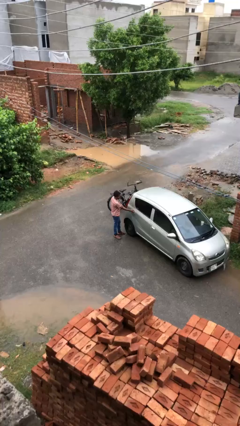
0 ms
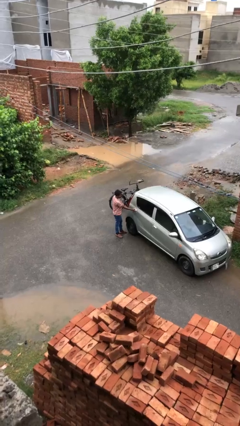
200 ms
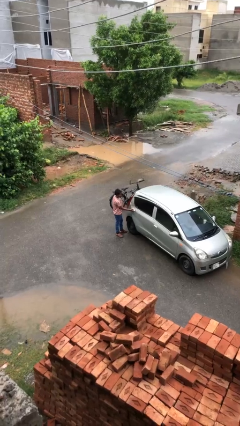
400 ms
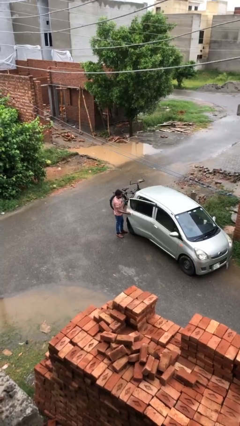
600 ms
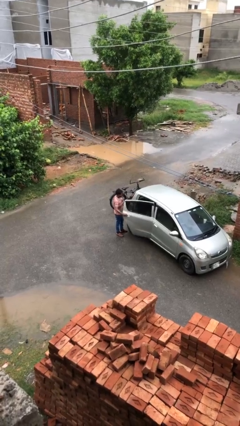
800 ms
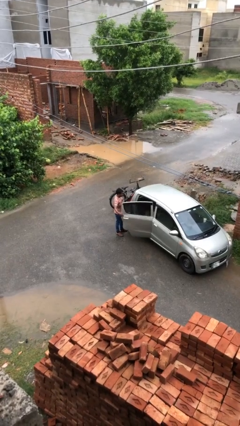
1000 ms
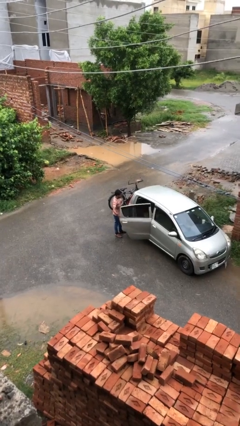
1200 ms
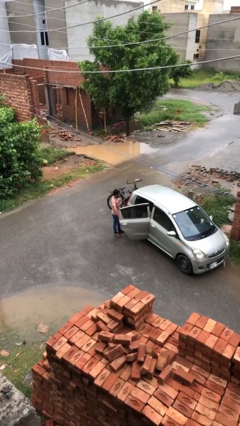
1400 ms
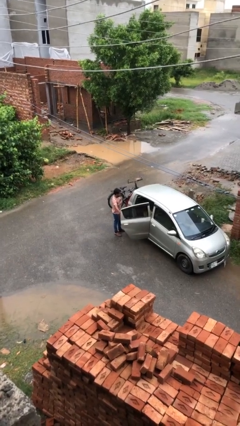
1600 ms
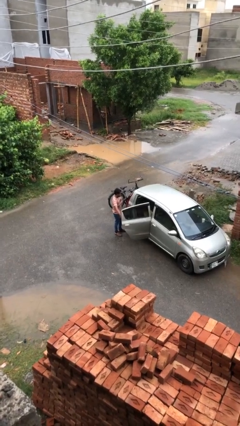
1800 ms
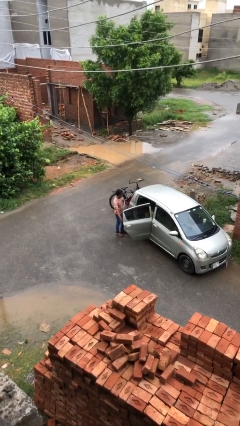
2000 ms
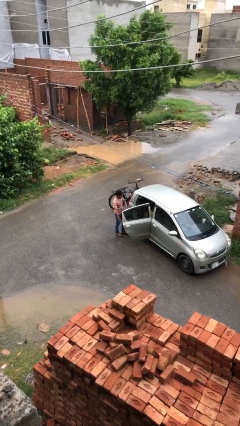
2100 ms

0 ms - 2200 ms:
person opens car door

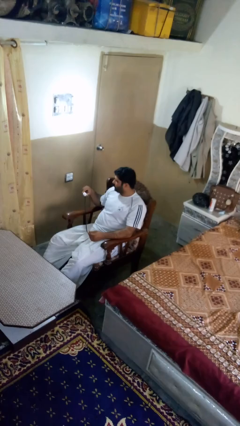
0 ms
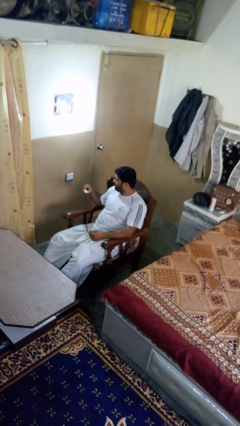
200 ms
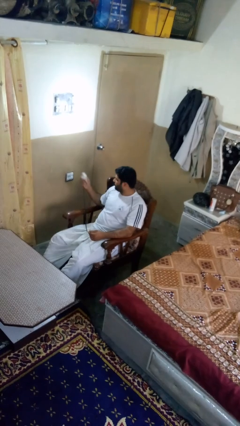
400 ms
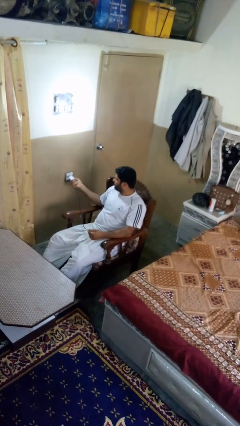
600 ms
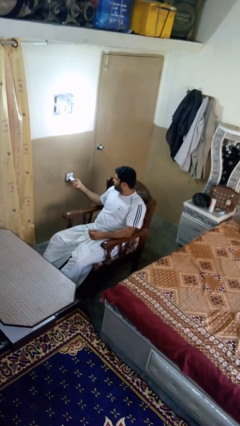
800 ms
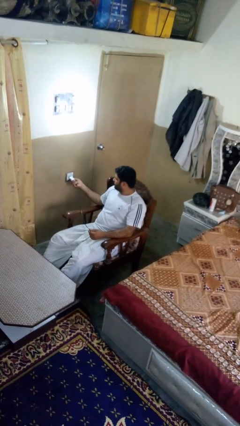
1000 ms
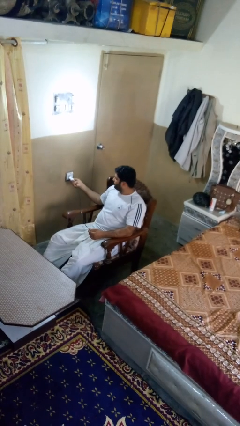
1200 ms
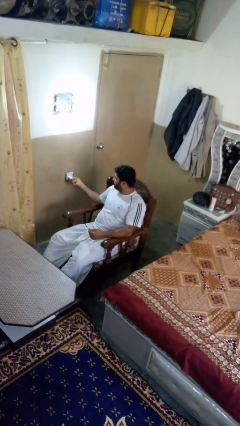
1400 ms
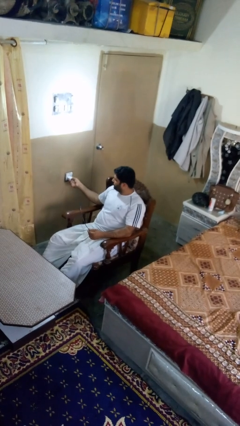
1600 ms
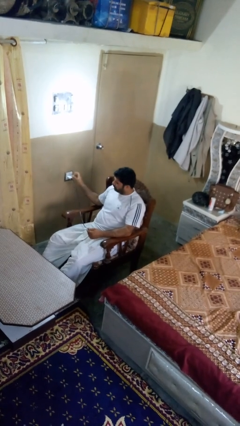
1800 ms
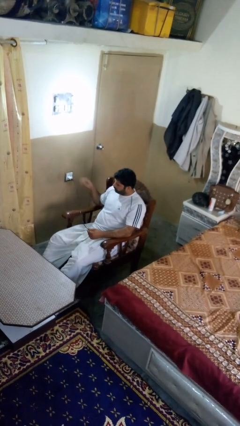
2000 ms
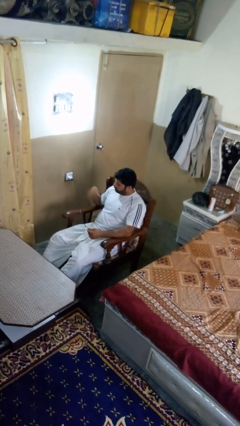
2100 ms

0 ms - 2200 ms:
person plugs into electrical socket

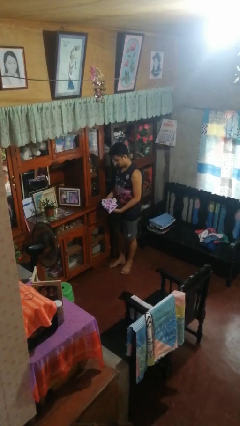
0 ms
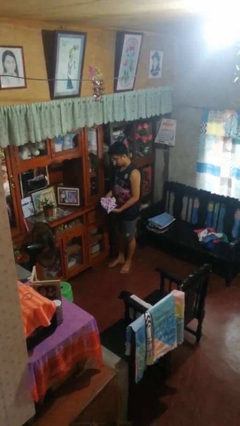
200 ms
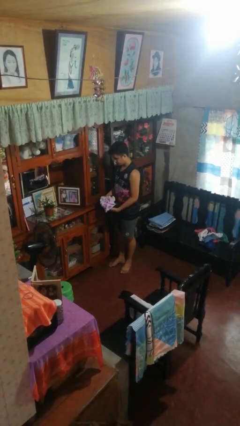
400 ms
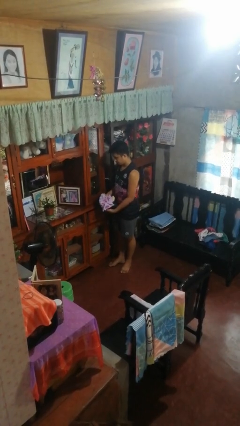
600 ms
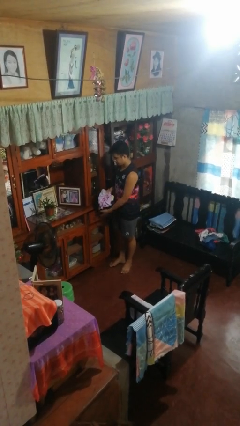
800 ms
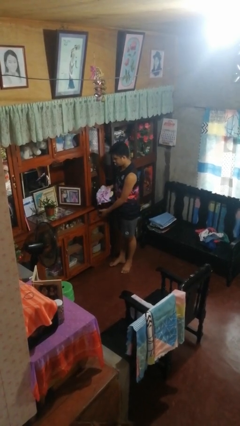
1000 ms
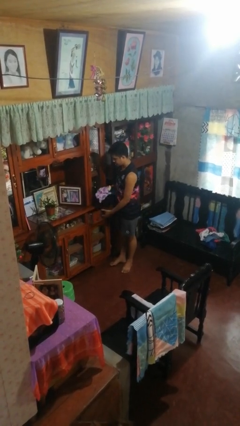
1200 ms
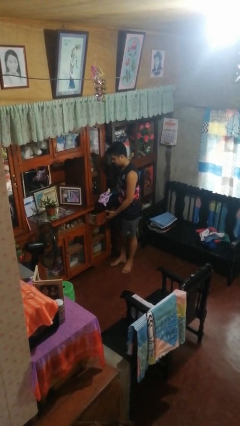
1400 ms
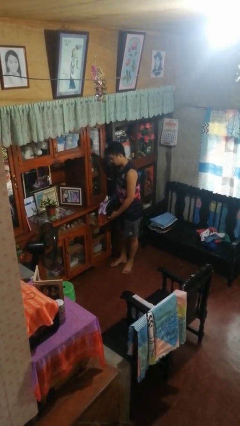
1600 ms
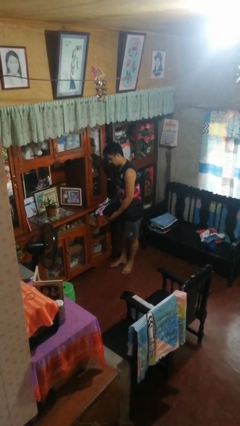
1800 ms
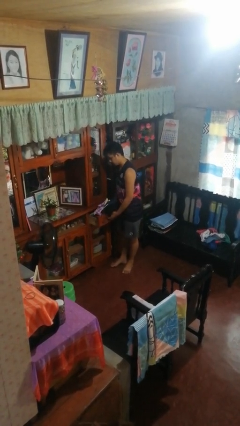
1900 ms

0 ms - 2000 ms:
person puts clothes into dresser

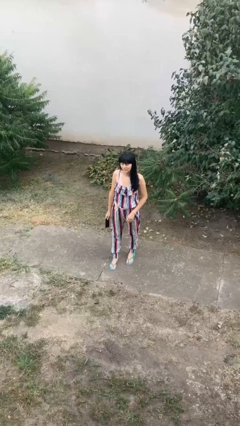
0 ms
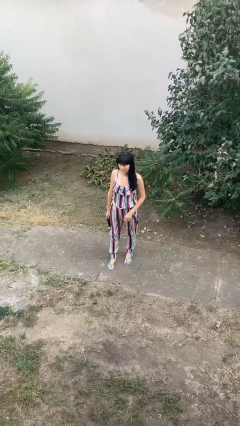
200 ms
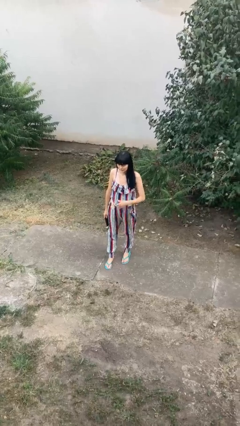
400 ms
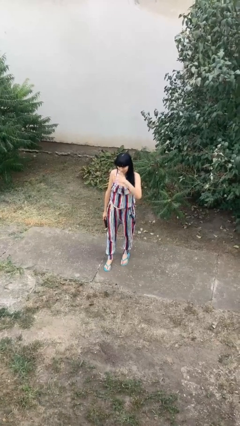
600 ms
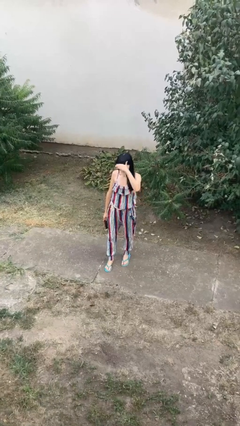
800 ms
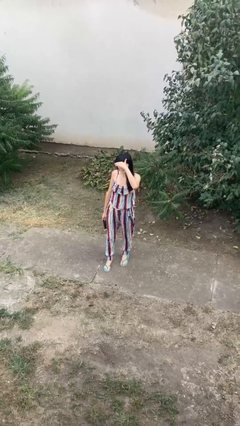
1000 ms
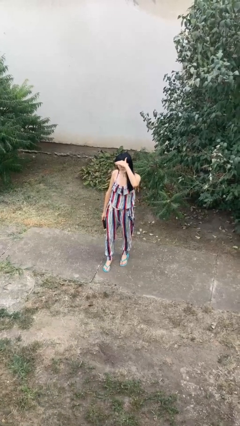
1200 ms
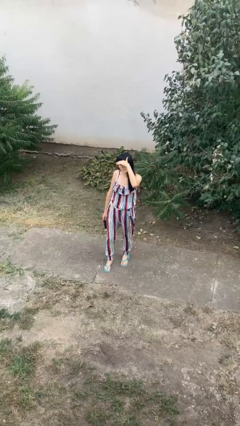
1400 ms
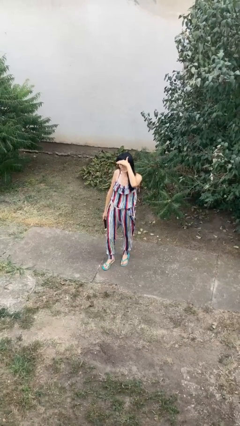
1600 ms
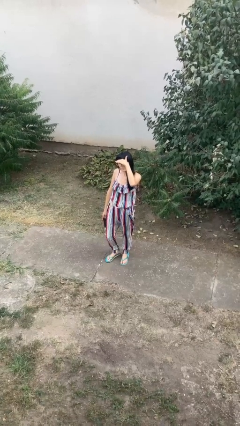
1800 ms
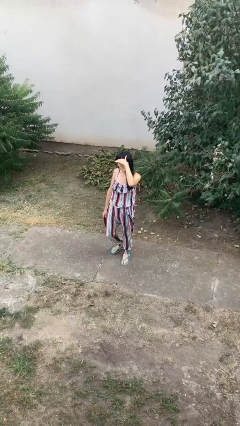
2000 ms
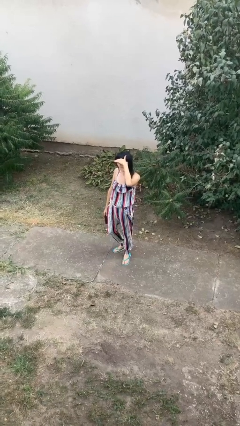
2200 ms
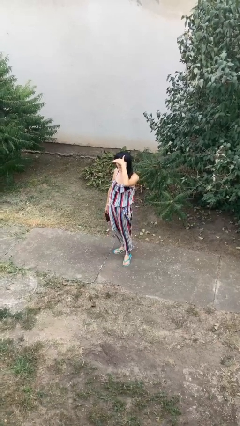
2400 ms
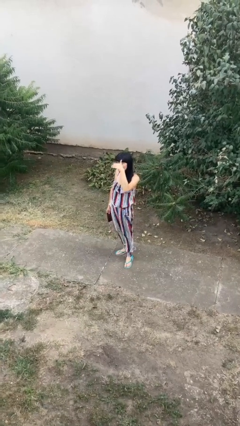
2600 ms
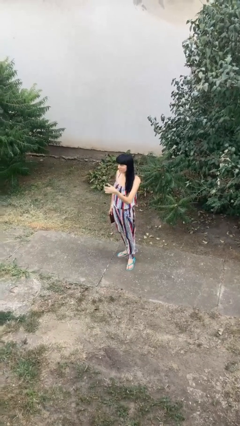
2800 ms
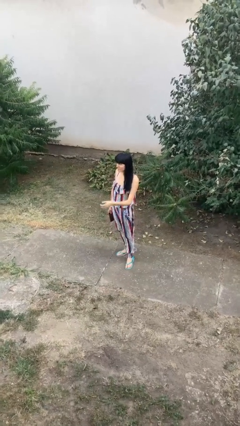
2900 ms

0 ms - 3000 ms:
person shades eyes

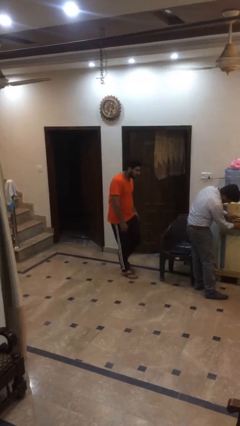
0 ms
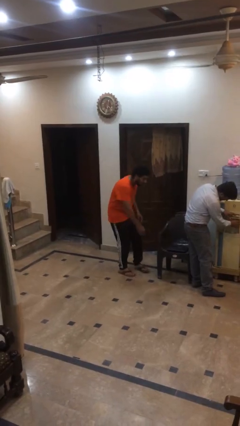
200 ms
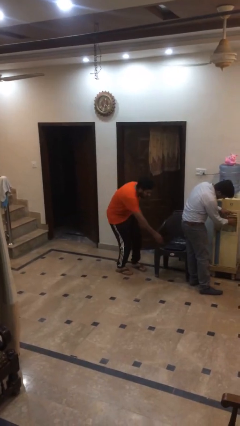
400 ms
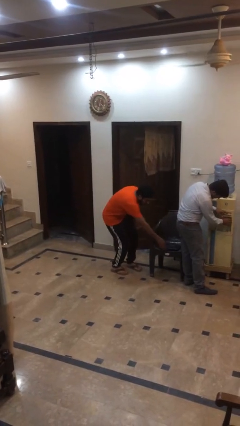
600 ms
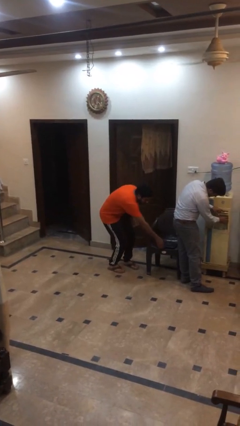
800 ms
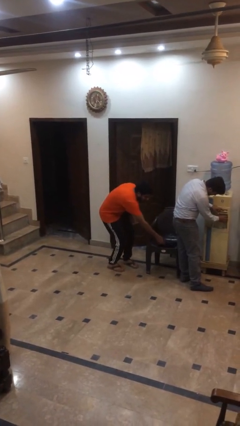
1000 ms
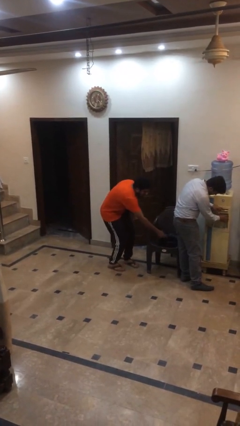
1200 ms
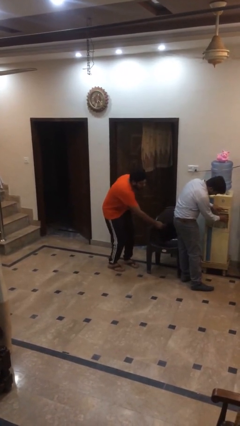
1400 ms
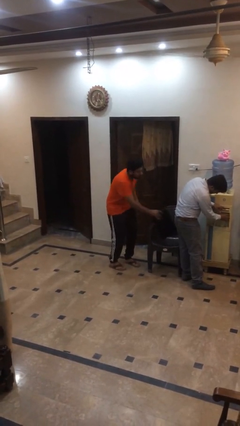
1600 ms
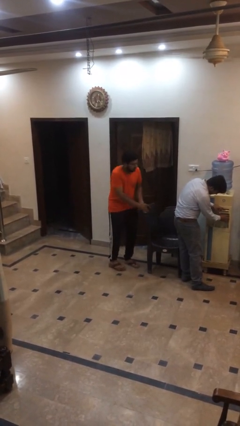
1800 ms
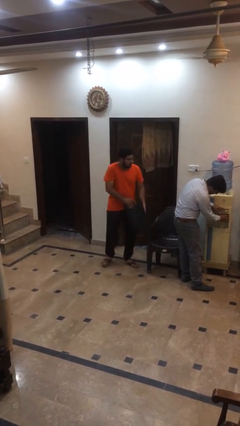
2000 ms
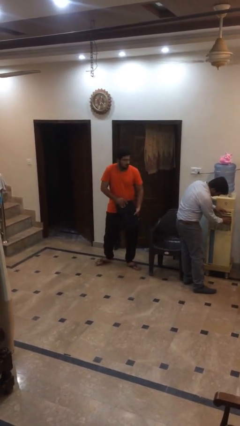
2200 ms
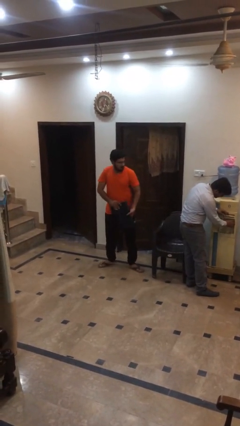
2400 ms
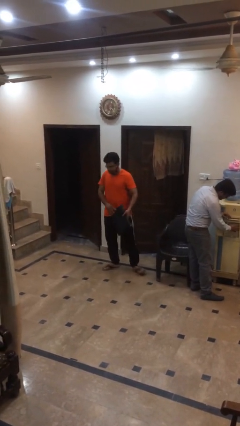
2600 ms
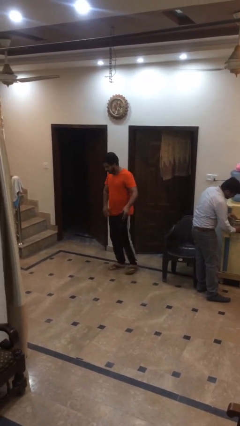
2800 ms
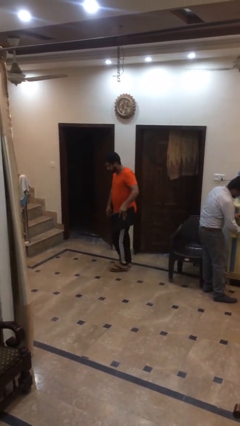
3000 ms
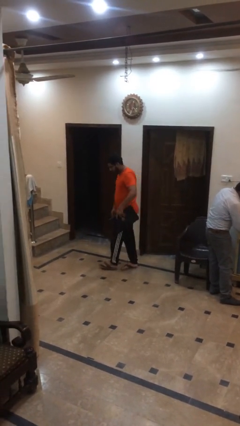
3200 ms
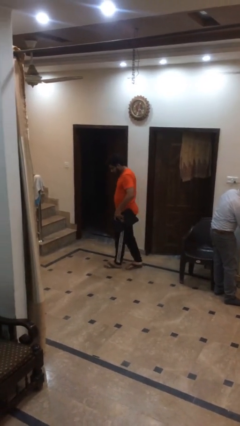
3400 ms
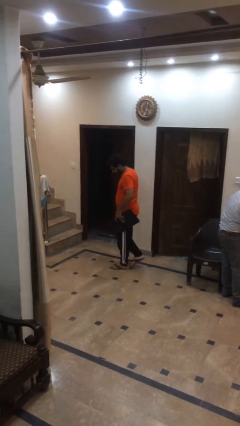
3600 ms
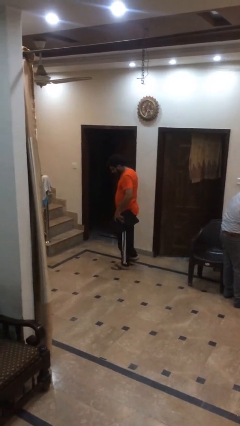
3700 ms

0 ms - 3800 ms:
person steals object from person

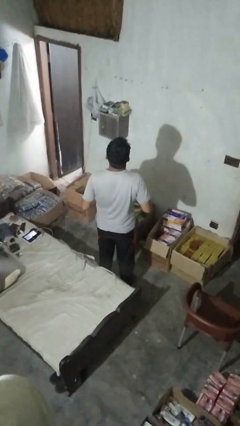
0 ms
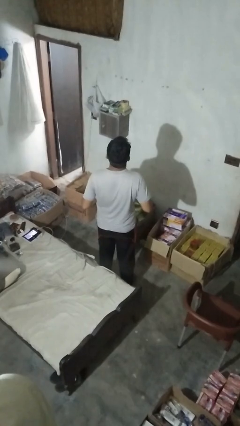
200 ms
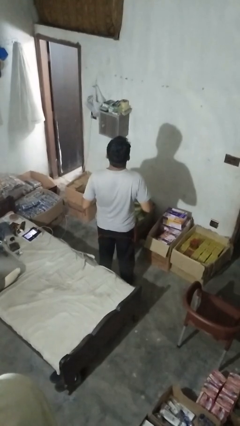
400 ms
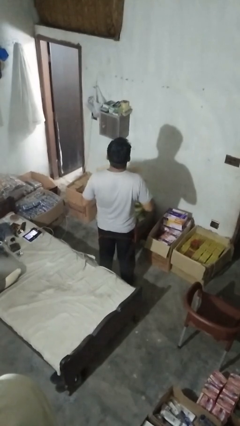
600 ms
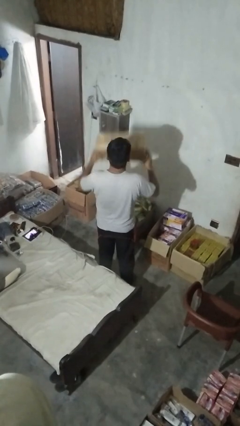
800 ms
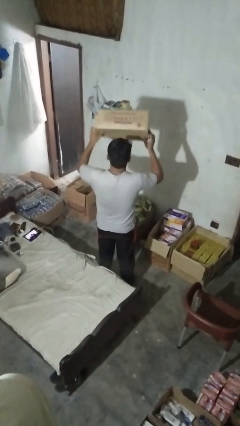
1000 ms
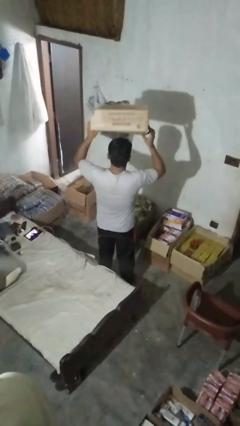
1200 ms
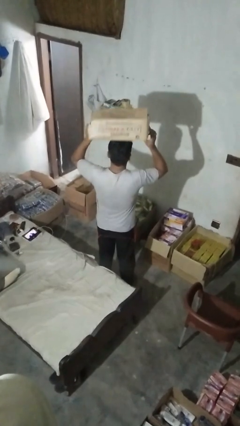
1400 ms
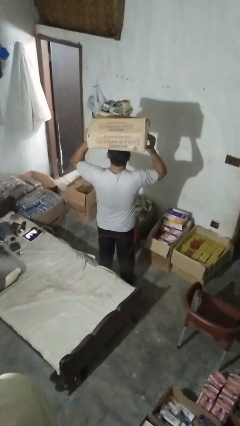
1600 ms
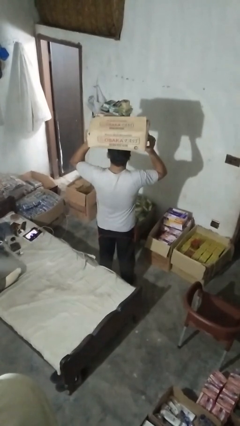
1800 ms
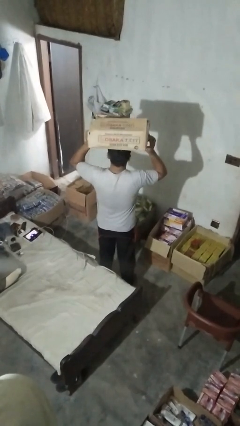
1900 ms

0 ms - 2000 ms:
person holds object above head

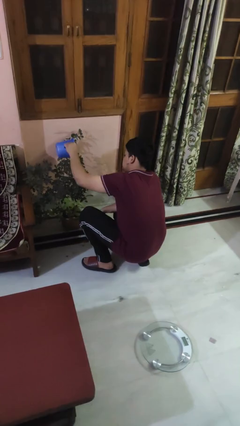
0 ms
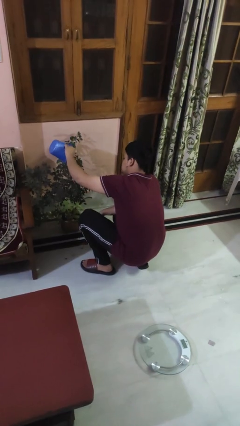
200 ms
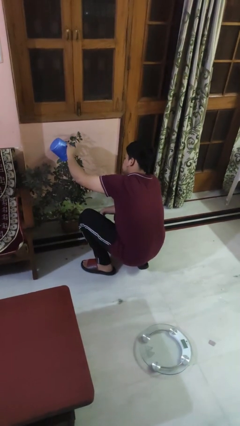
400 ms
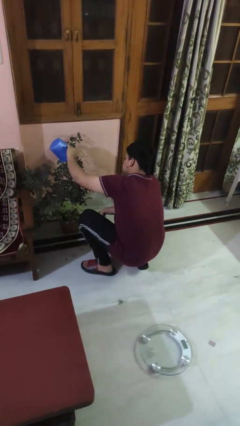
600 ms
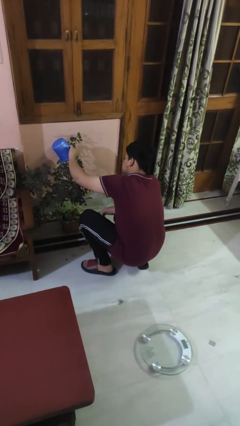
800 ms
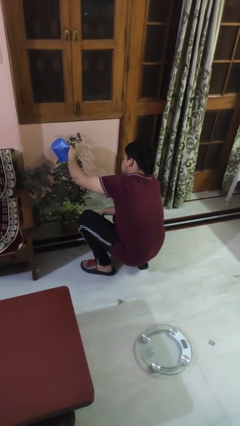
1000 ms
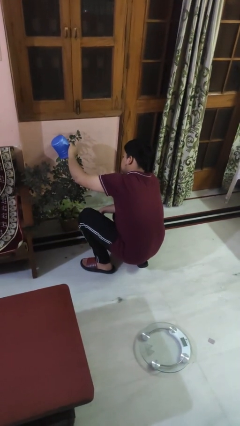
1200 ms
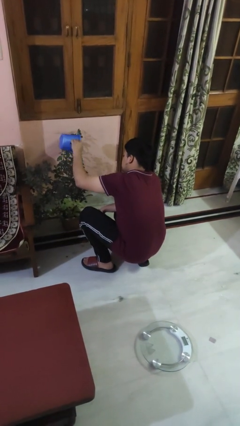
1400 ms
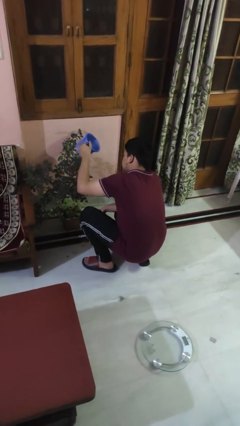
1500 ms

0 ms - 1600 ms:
person waters houseplant
